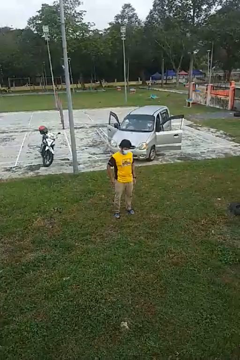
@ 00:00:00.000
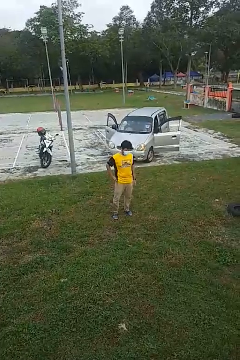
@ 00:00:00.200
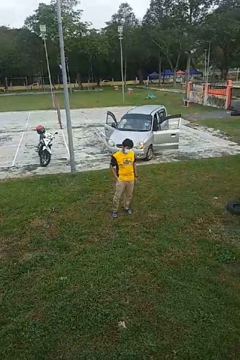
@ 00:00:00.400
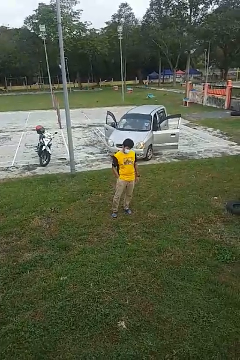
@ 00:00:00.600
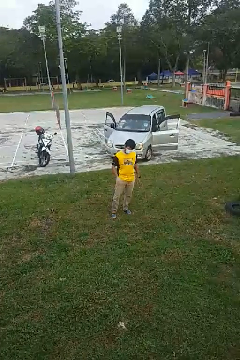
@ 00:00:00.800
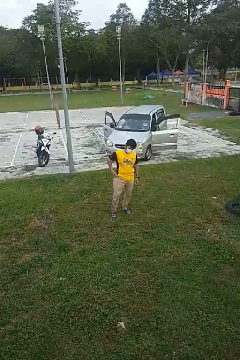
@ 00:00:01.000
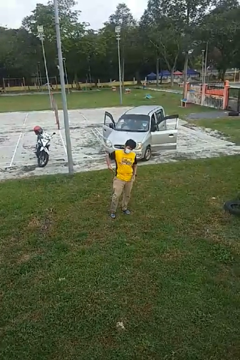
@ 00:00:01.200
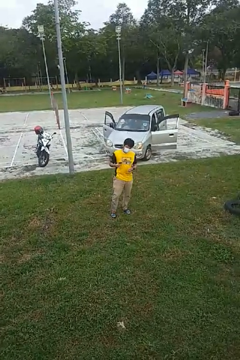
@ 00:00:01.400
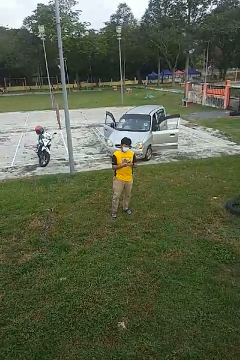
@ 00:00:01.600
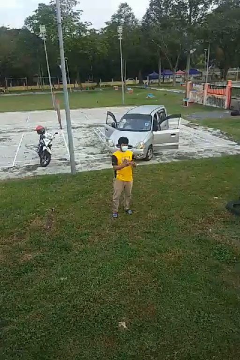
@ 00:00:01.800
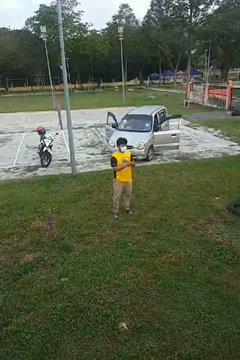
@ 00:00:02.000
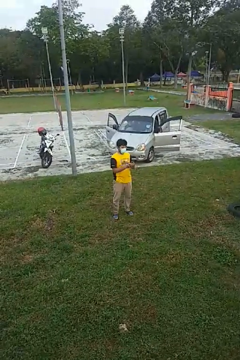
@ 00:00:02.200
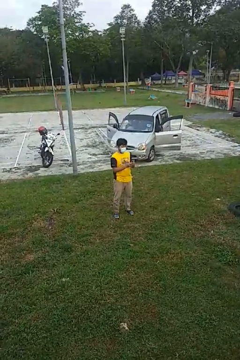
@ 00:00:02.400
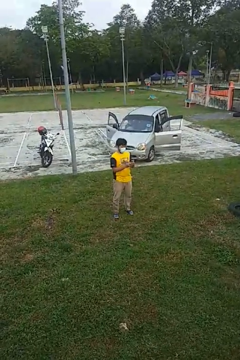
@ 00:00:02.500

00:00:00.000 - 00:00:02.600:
person takes phone from pocket

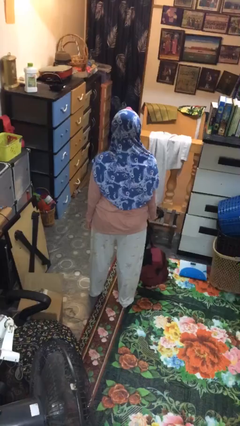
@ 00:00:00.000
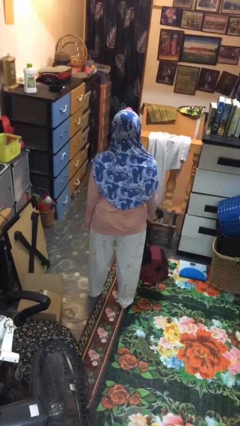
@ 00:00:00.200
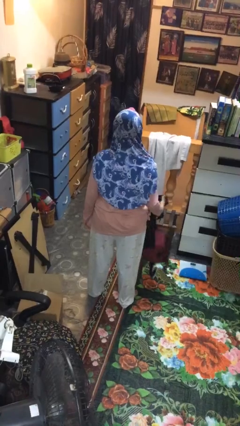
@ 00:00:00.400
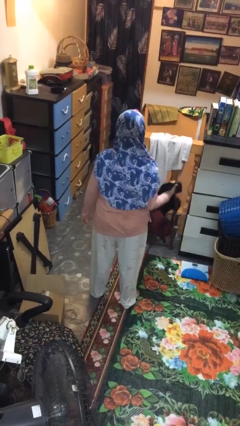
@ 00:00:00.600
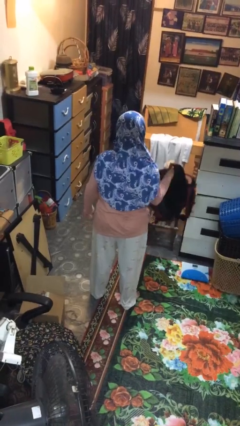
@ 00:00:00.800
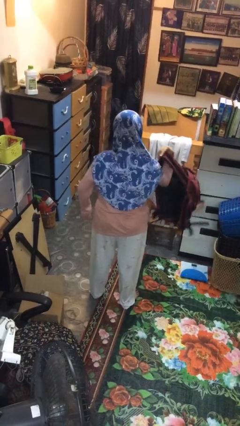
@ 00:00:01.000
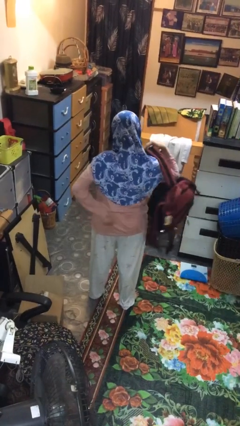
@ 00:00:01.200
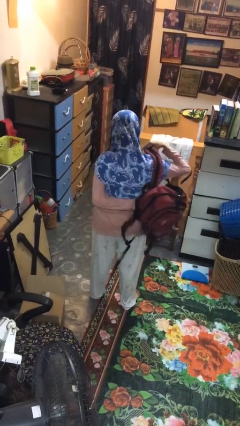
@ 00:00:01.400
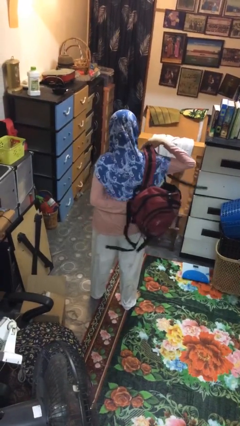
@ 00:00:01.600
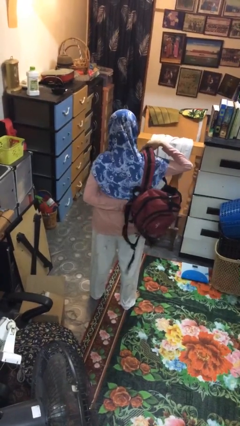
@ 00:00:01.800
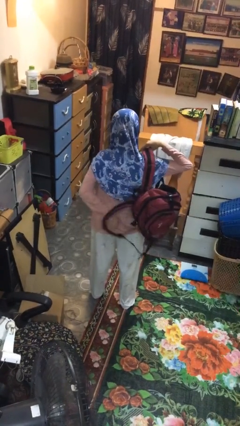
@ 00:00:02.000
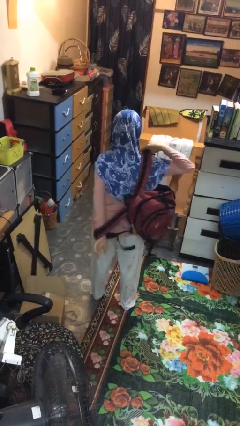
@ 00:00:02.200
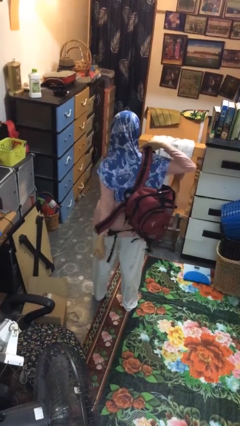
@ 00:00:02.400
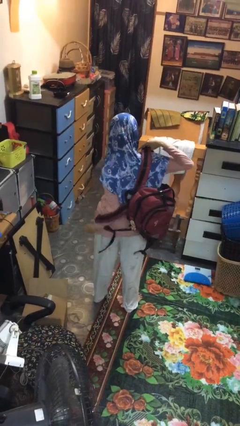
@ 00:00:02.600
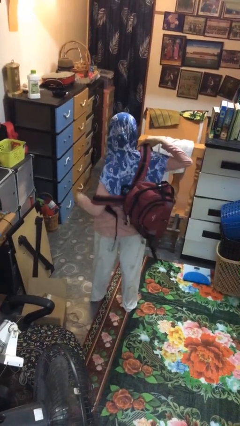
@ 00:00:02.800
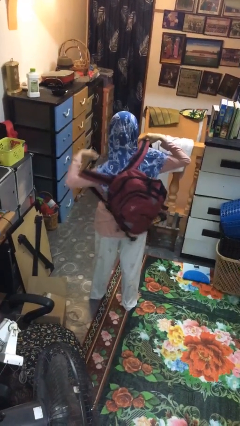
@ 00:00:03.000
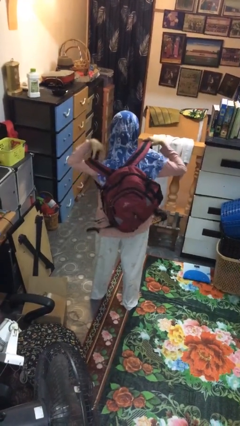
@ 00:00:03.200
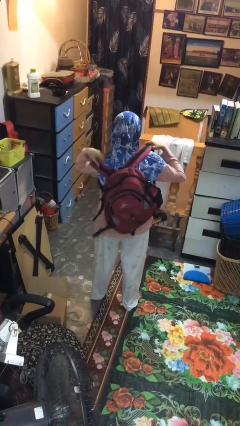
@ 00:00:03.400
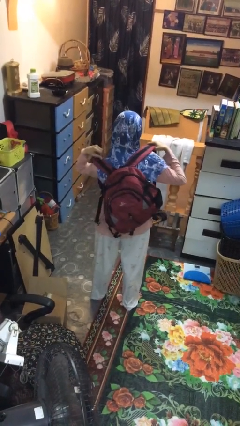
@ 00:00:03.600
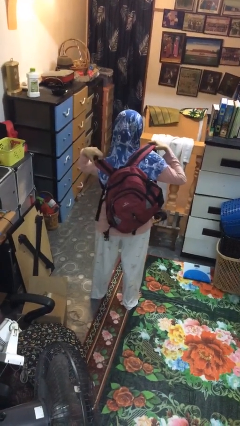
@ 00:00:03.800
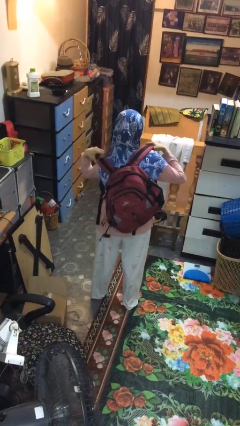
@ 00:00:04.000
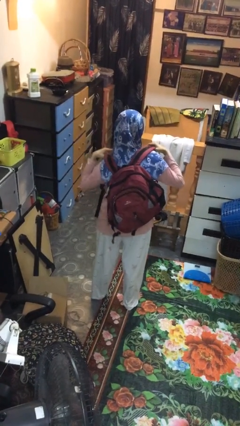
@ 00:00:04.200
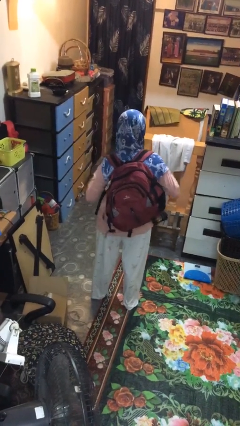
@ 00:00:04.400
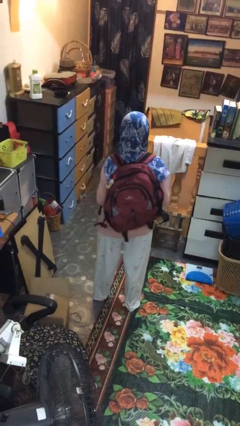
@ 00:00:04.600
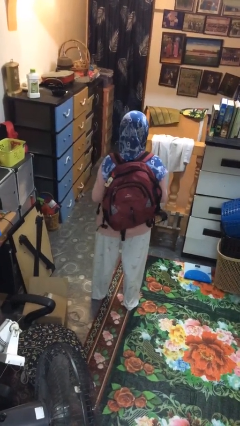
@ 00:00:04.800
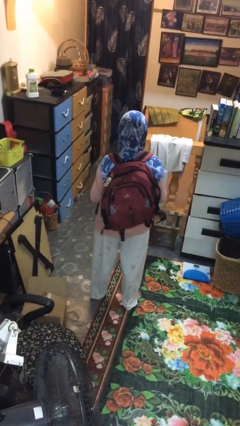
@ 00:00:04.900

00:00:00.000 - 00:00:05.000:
person puts on backpack

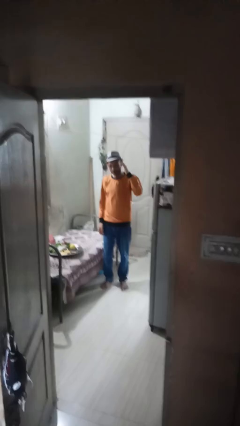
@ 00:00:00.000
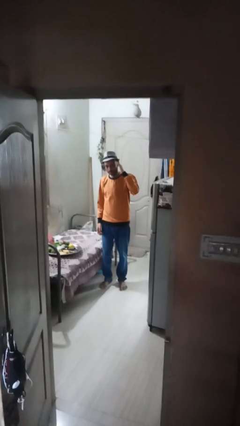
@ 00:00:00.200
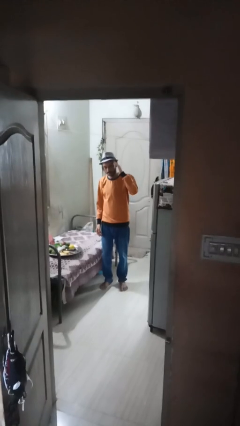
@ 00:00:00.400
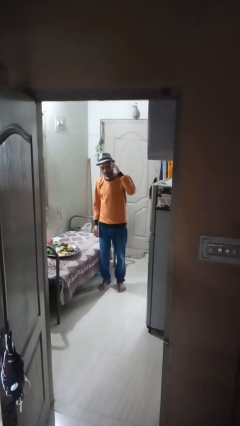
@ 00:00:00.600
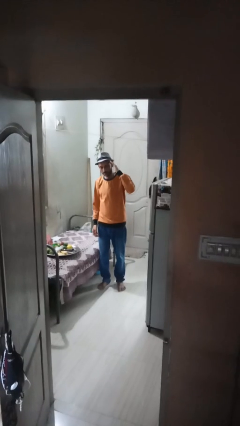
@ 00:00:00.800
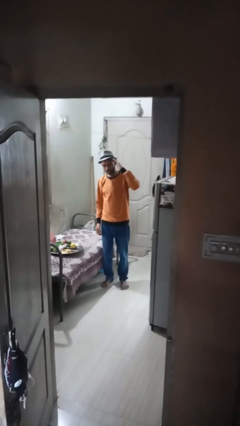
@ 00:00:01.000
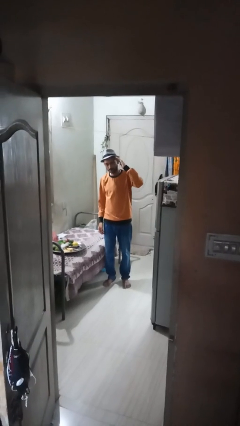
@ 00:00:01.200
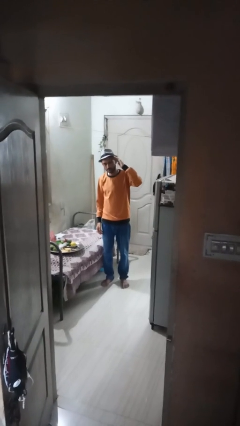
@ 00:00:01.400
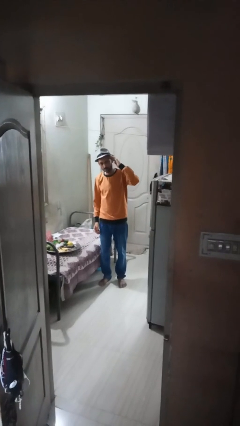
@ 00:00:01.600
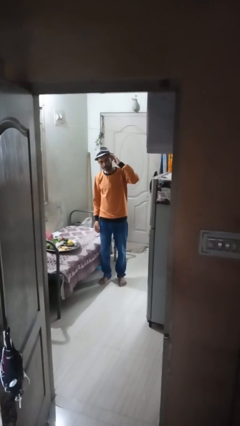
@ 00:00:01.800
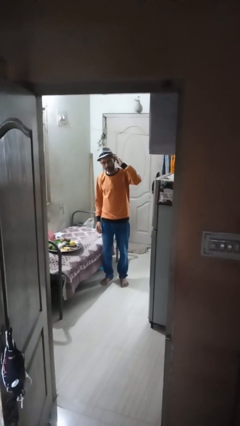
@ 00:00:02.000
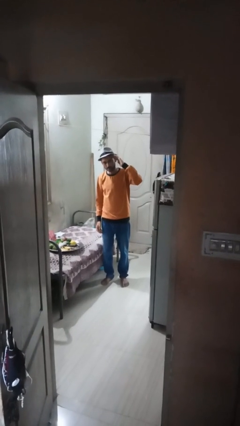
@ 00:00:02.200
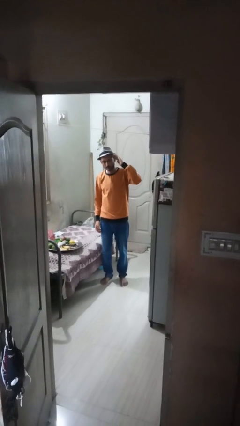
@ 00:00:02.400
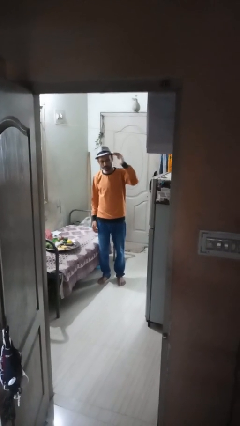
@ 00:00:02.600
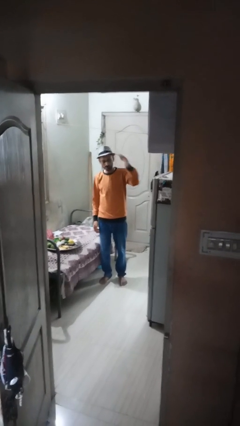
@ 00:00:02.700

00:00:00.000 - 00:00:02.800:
person salutes

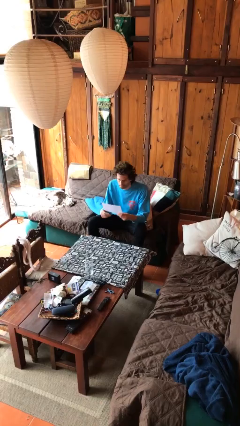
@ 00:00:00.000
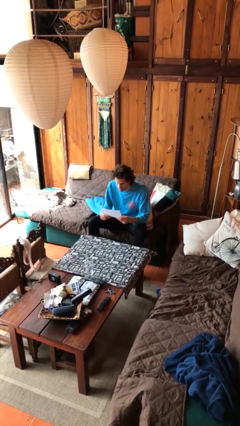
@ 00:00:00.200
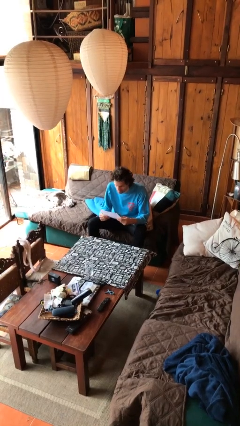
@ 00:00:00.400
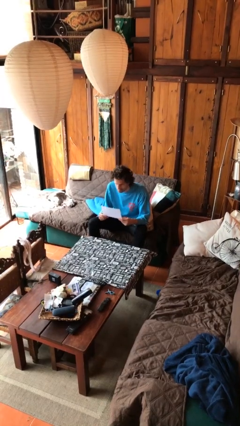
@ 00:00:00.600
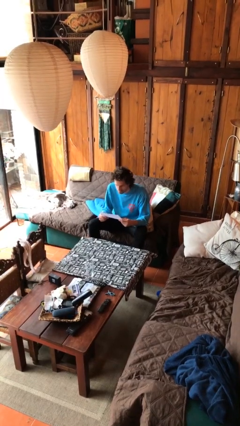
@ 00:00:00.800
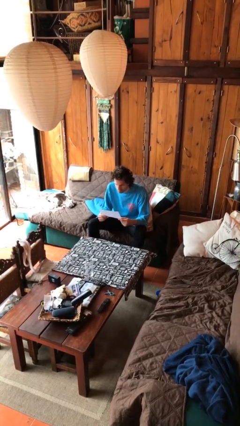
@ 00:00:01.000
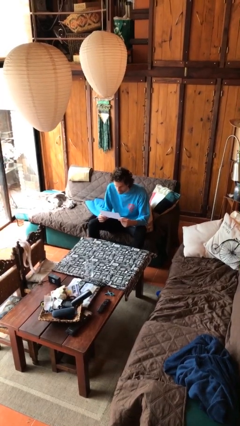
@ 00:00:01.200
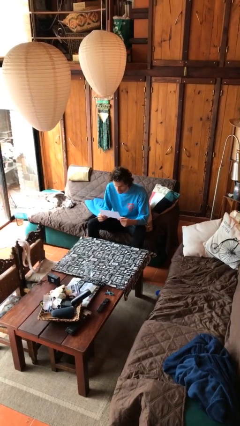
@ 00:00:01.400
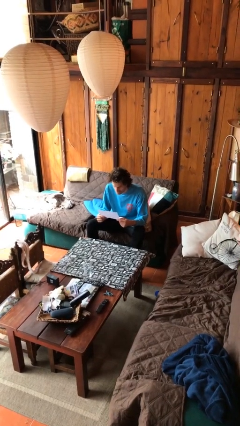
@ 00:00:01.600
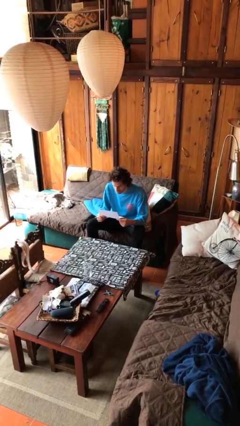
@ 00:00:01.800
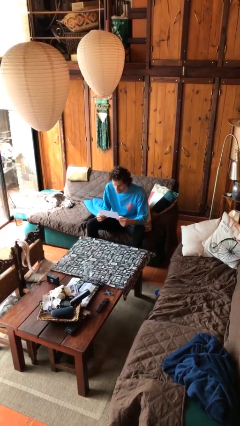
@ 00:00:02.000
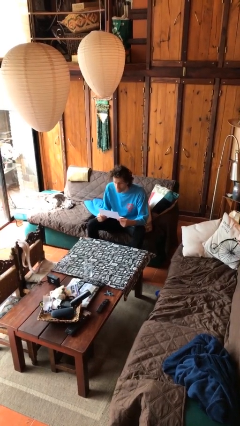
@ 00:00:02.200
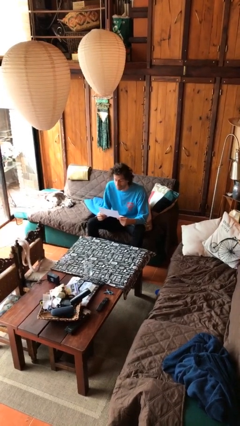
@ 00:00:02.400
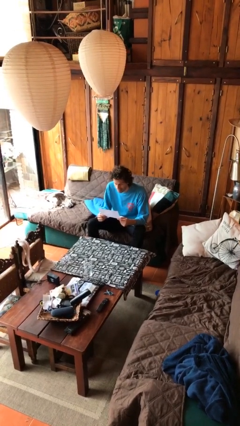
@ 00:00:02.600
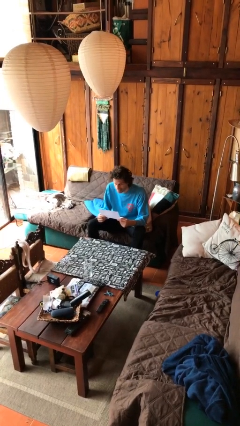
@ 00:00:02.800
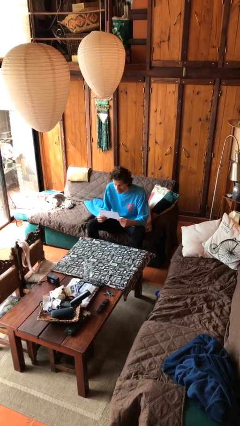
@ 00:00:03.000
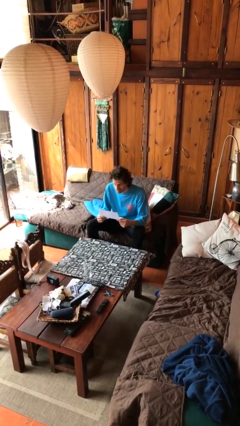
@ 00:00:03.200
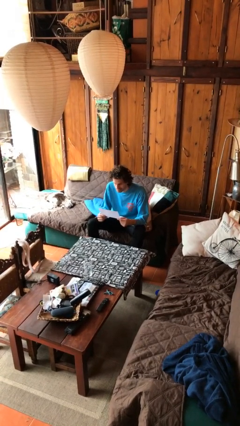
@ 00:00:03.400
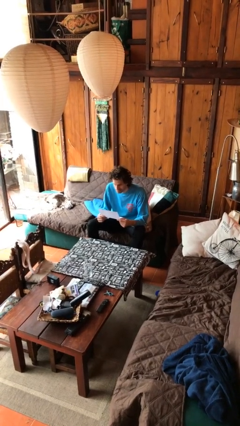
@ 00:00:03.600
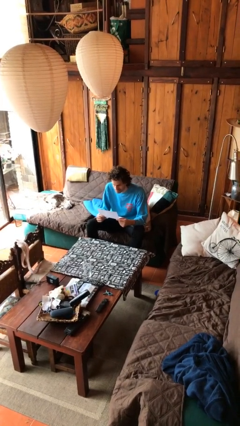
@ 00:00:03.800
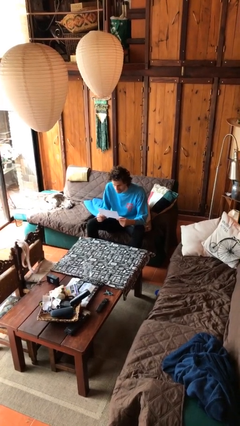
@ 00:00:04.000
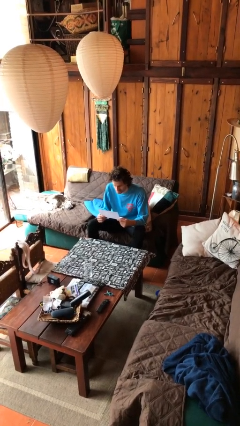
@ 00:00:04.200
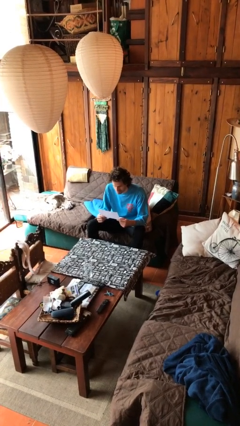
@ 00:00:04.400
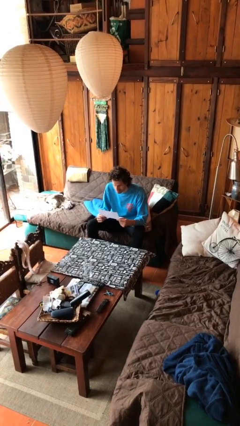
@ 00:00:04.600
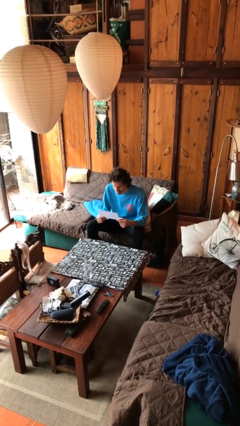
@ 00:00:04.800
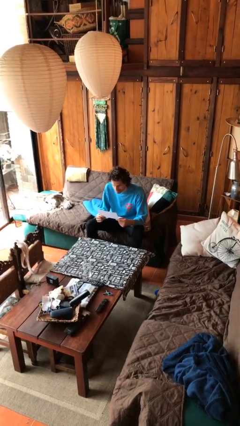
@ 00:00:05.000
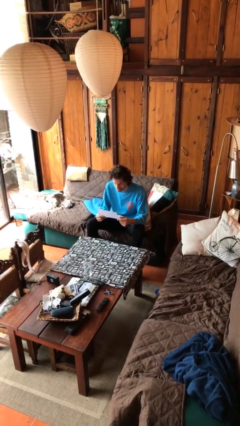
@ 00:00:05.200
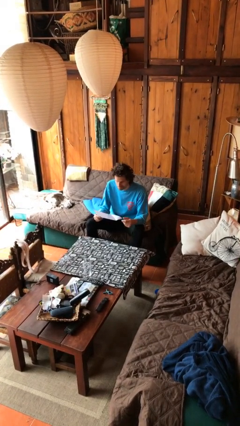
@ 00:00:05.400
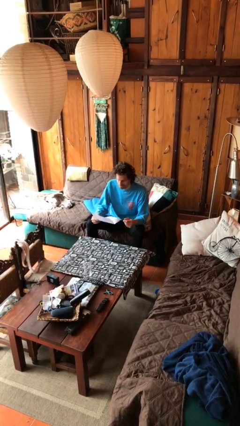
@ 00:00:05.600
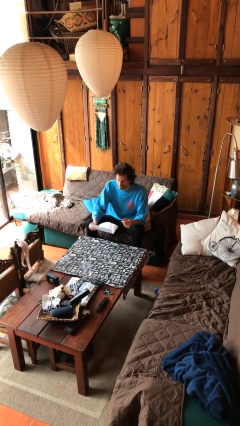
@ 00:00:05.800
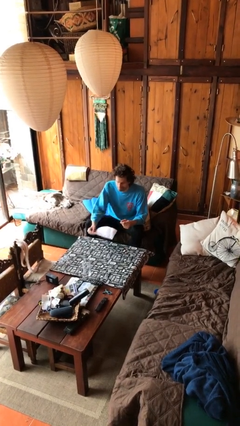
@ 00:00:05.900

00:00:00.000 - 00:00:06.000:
person reads document

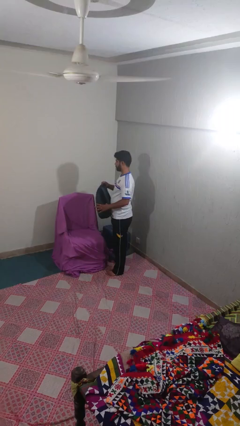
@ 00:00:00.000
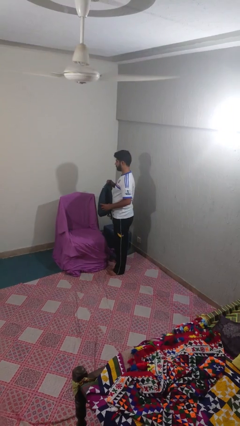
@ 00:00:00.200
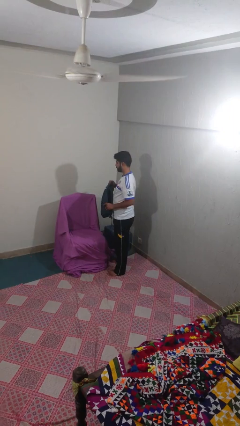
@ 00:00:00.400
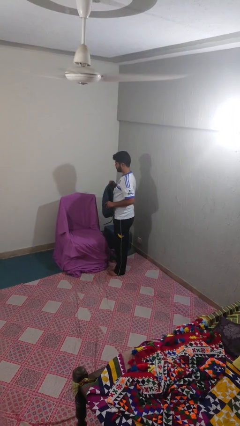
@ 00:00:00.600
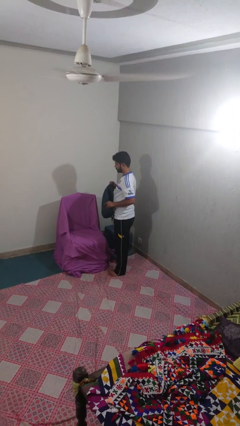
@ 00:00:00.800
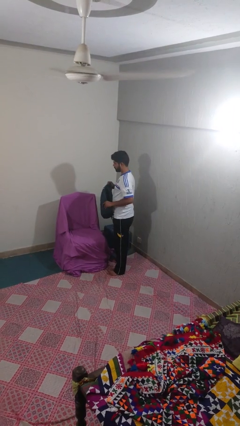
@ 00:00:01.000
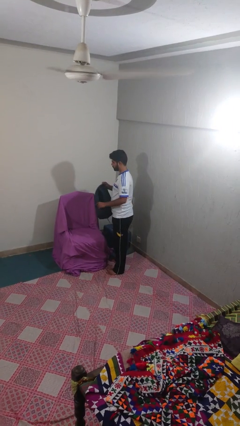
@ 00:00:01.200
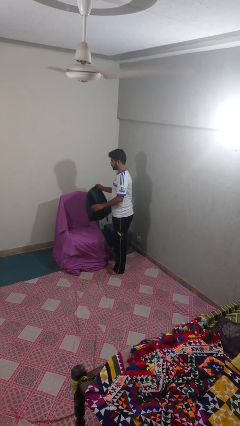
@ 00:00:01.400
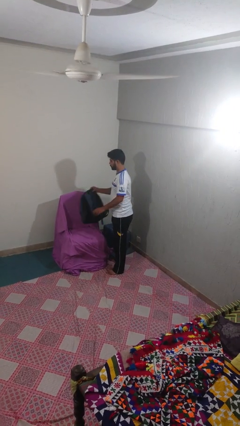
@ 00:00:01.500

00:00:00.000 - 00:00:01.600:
person puts down object on couch
